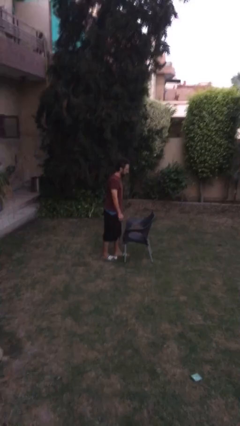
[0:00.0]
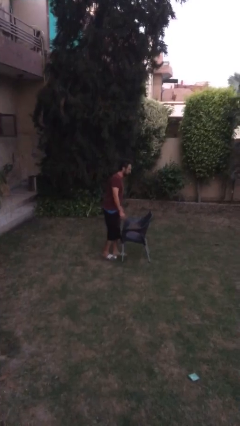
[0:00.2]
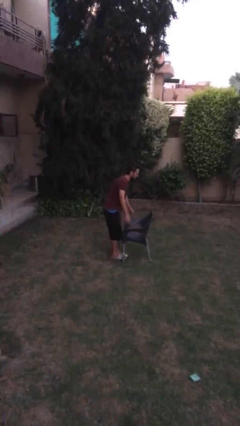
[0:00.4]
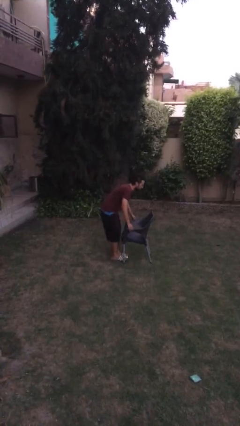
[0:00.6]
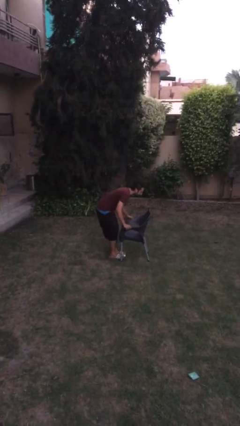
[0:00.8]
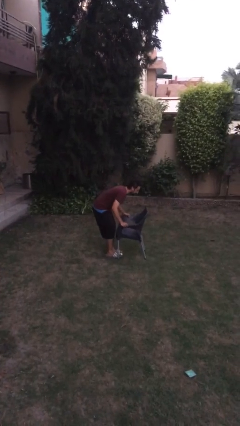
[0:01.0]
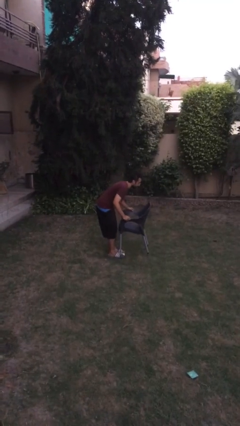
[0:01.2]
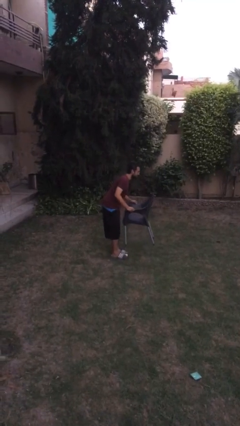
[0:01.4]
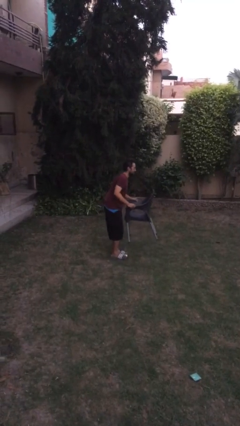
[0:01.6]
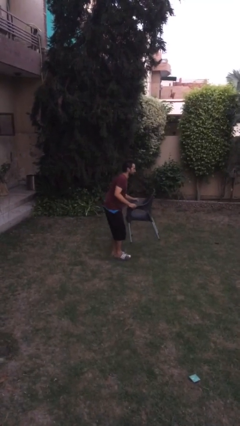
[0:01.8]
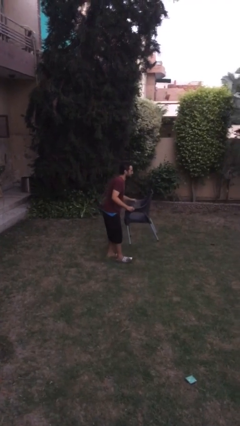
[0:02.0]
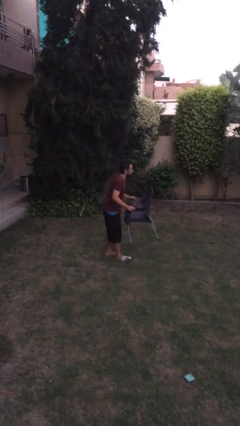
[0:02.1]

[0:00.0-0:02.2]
person picks up object from floor

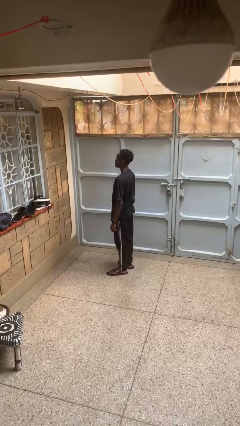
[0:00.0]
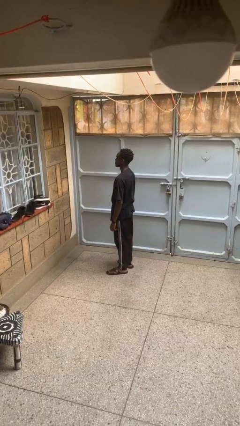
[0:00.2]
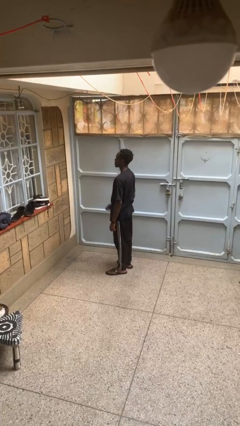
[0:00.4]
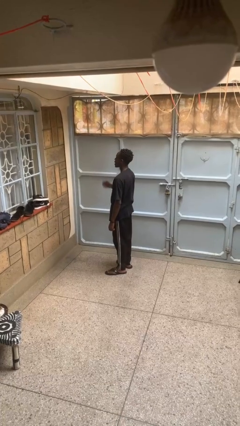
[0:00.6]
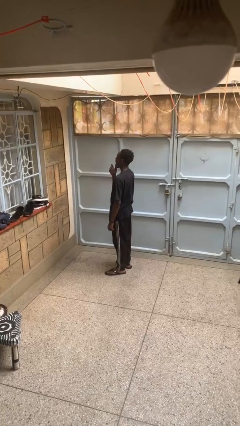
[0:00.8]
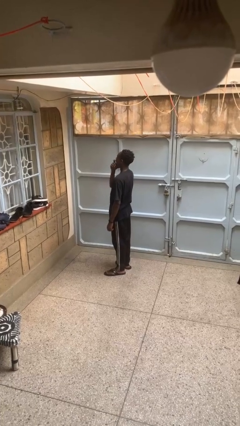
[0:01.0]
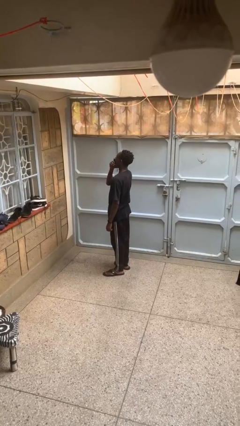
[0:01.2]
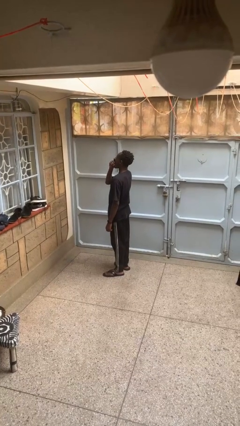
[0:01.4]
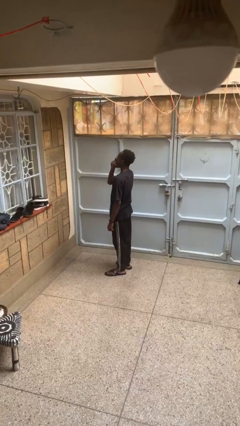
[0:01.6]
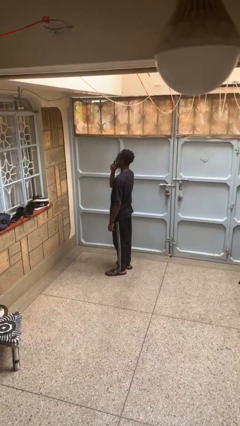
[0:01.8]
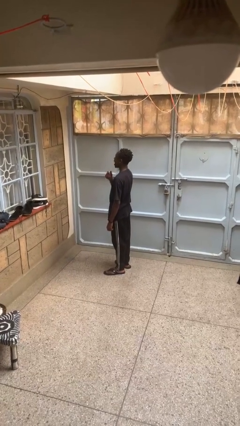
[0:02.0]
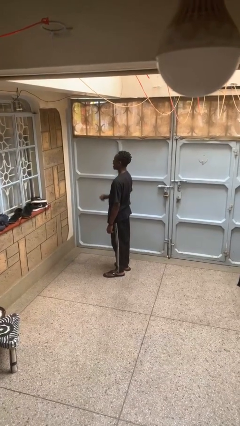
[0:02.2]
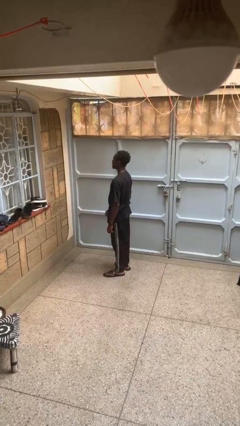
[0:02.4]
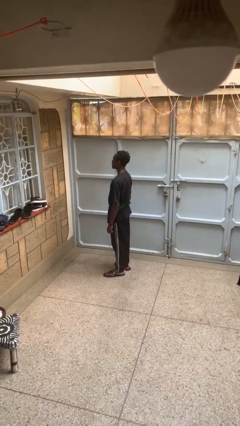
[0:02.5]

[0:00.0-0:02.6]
person yawns

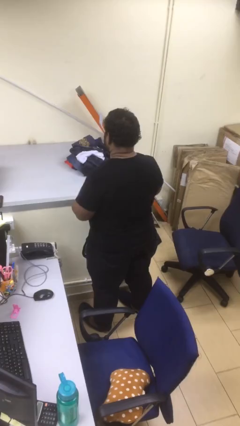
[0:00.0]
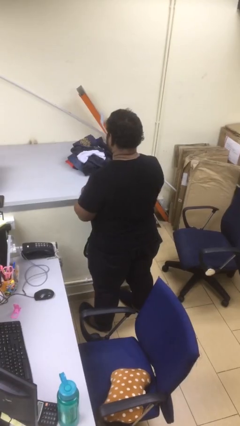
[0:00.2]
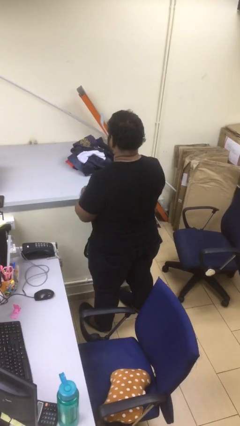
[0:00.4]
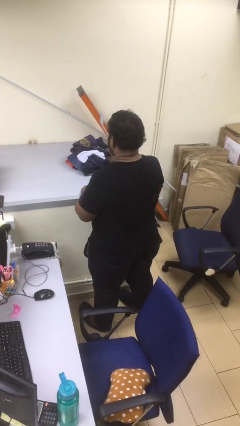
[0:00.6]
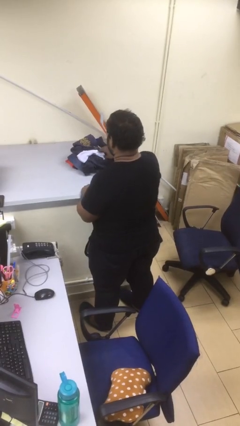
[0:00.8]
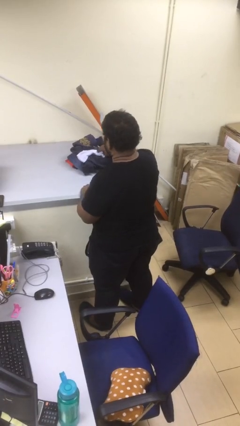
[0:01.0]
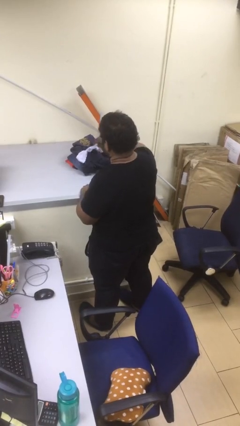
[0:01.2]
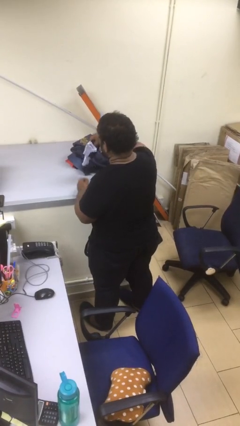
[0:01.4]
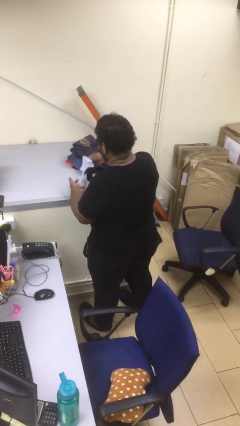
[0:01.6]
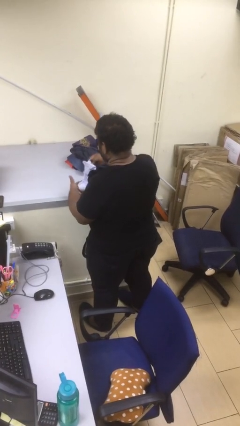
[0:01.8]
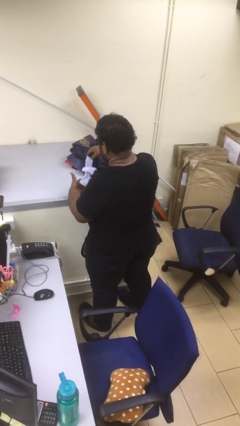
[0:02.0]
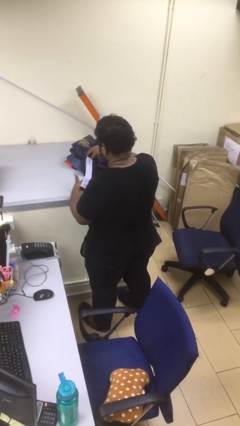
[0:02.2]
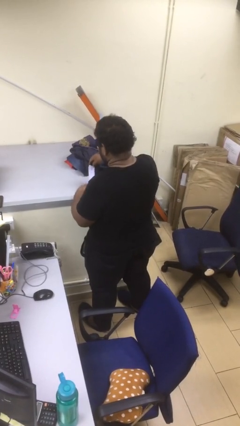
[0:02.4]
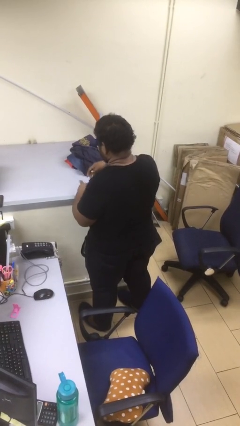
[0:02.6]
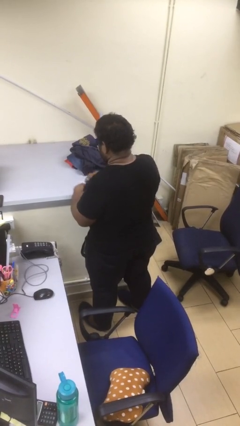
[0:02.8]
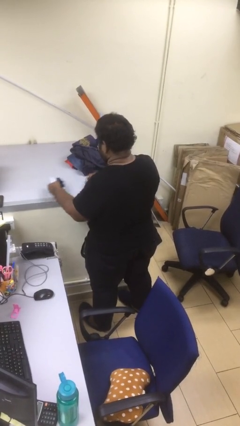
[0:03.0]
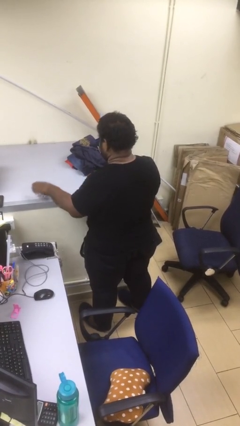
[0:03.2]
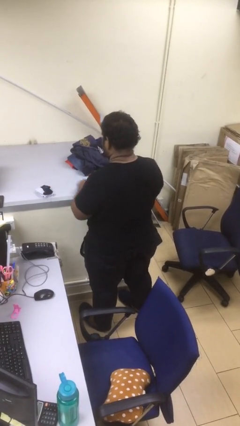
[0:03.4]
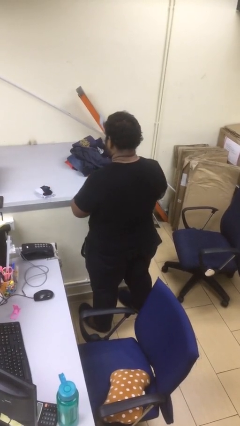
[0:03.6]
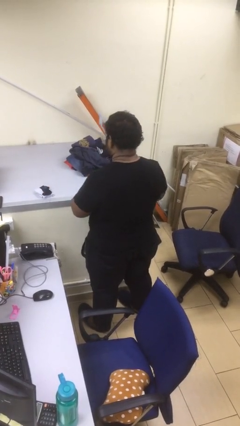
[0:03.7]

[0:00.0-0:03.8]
person folds socks

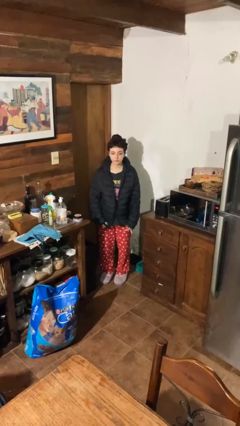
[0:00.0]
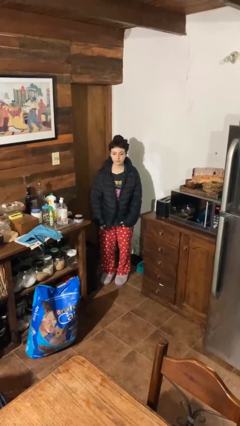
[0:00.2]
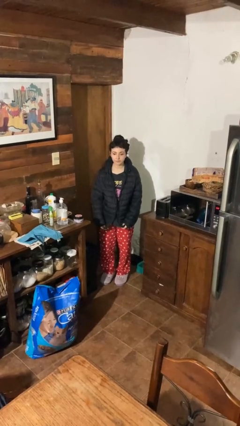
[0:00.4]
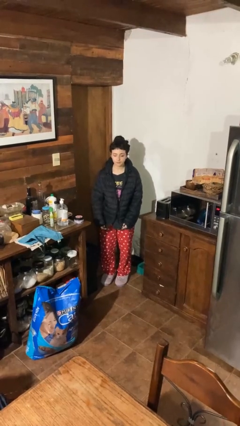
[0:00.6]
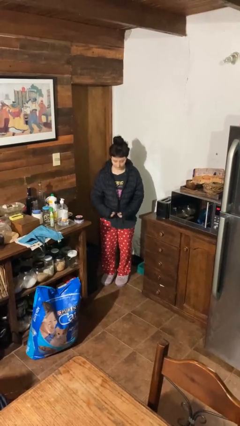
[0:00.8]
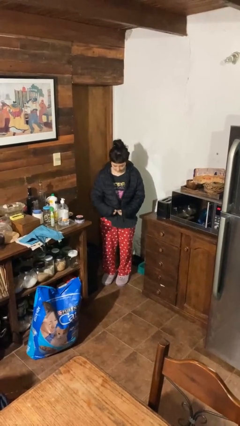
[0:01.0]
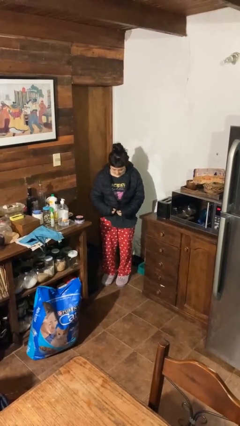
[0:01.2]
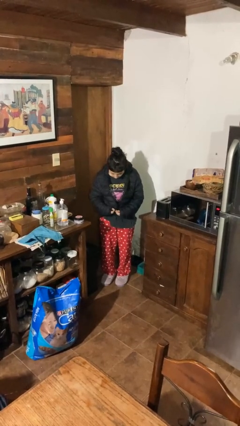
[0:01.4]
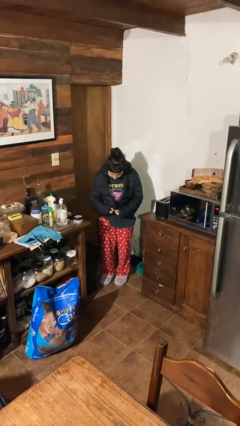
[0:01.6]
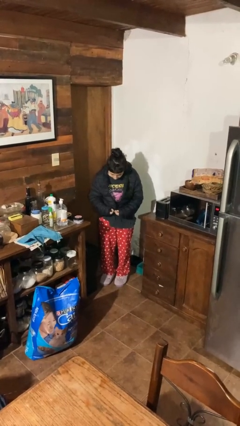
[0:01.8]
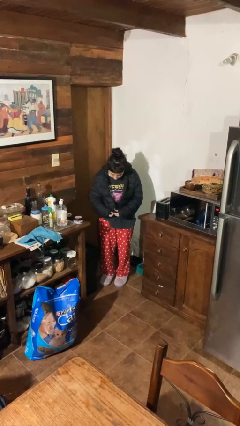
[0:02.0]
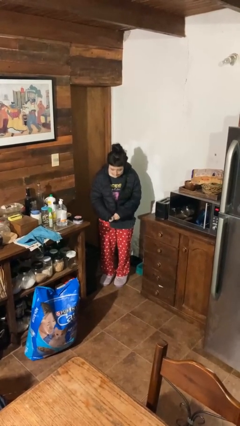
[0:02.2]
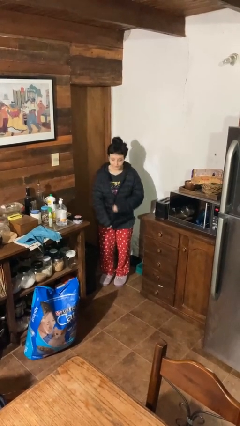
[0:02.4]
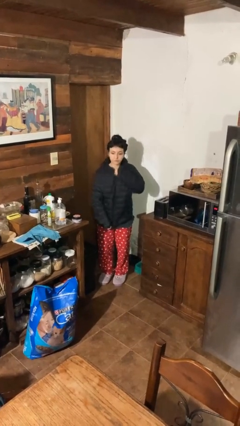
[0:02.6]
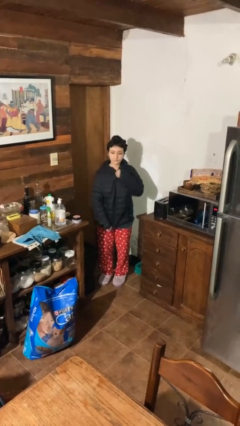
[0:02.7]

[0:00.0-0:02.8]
person zips up jacket

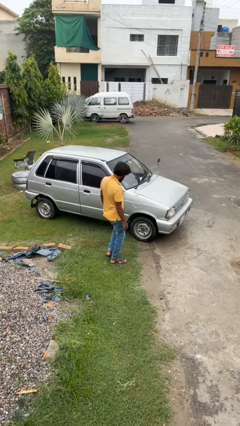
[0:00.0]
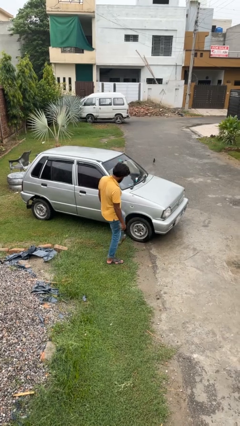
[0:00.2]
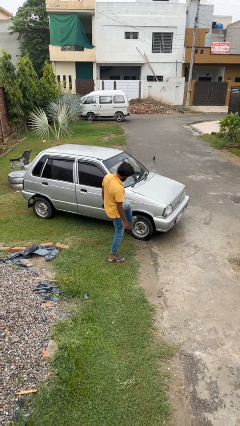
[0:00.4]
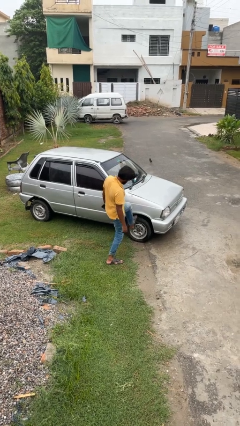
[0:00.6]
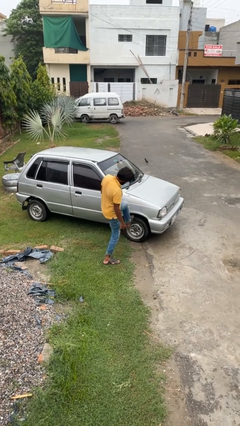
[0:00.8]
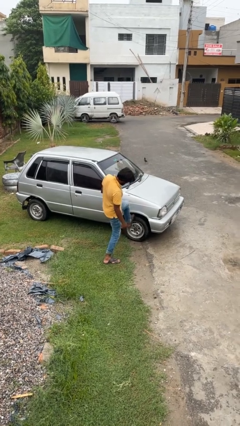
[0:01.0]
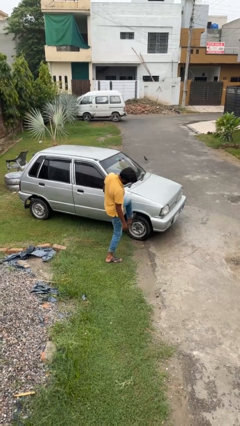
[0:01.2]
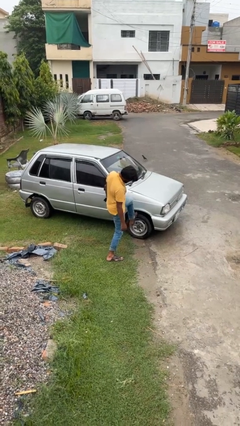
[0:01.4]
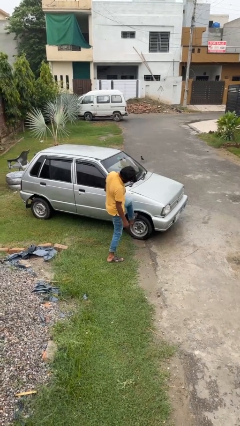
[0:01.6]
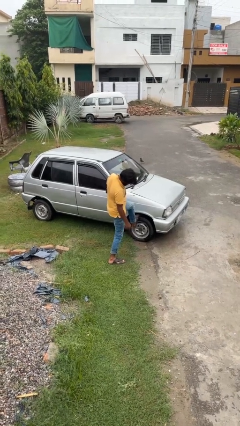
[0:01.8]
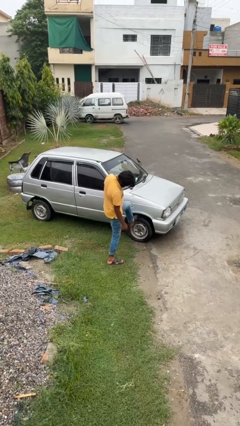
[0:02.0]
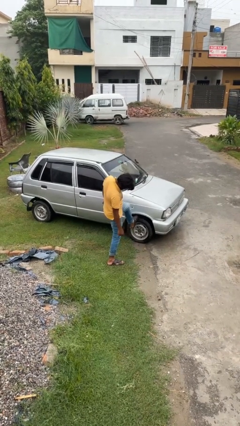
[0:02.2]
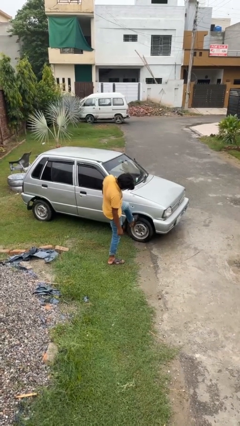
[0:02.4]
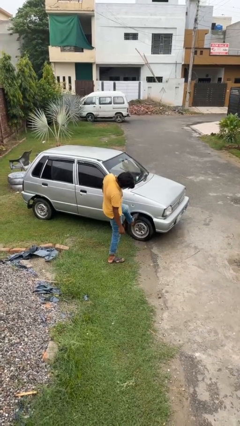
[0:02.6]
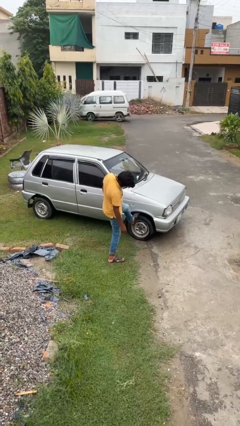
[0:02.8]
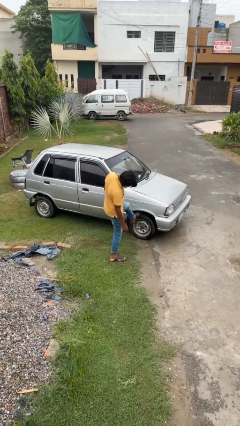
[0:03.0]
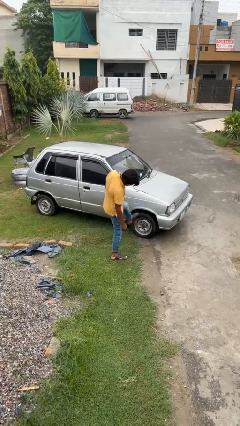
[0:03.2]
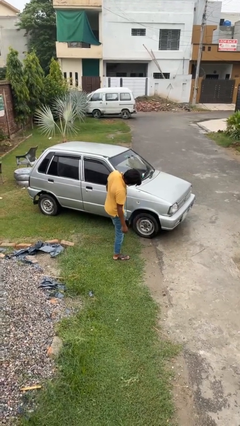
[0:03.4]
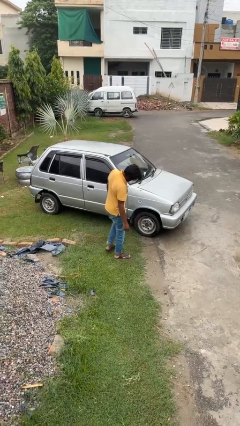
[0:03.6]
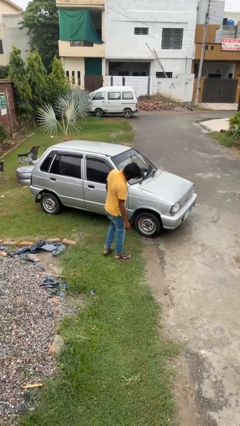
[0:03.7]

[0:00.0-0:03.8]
person kicks car tires

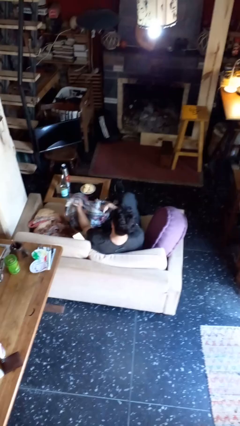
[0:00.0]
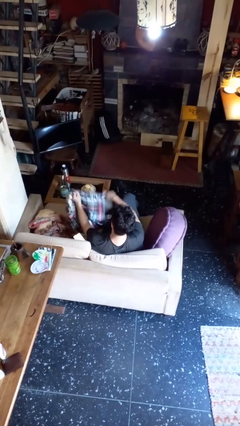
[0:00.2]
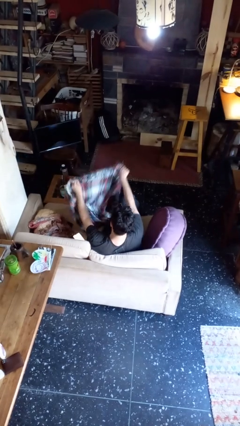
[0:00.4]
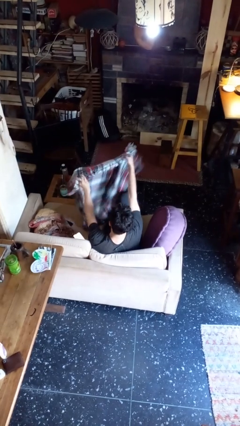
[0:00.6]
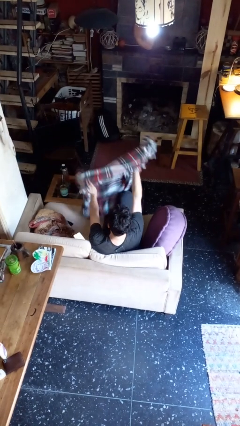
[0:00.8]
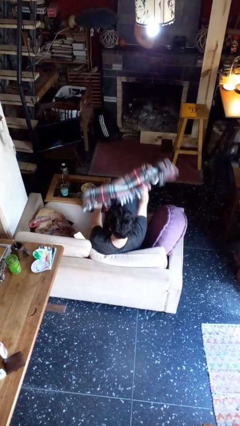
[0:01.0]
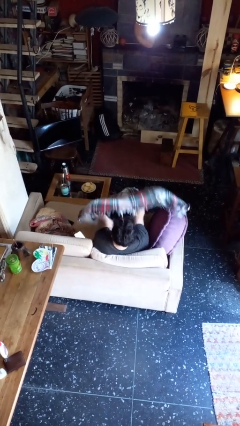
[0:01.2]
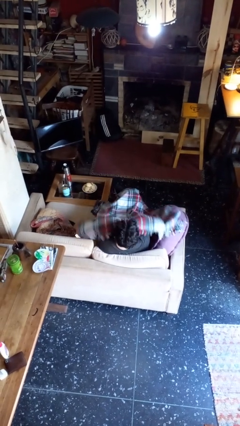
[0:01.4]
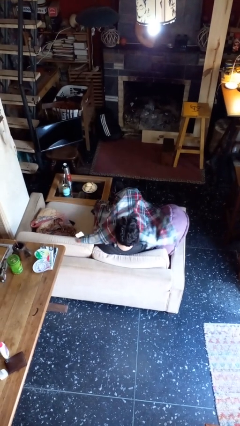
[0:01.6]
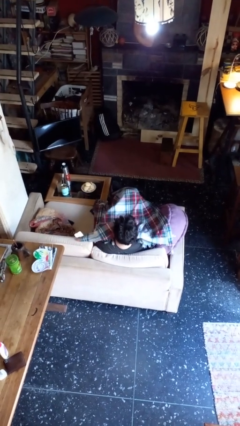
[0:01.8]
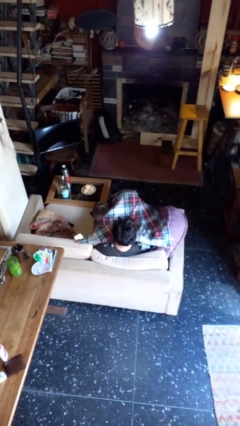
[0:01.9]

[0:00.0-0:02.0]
person covers with blanket

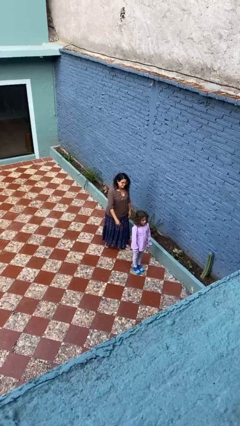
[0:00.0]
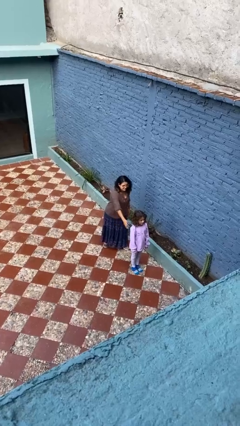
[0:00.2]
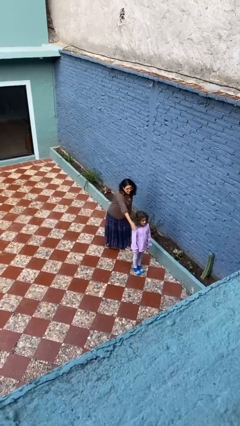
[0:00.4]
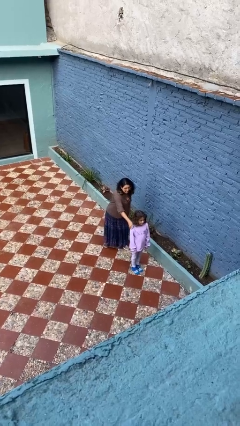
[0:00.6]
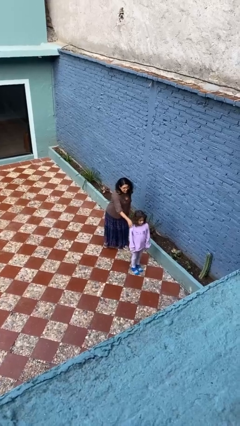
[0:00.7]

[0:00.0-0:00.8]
person grabs person by shoulder
